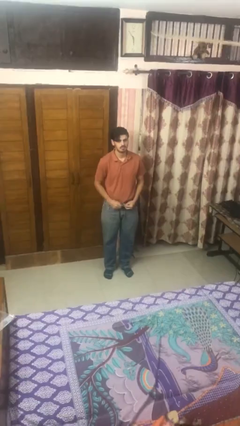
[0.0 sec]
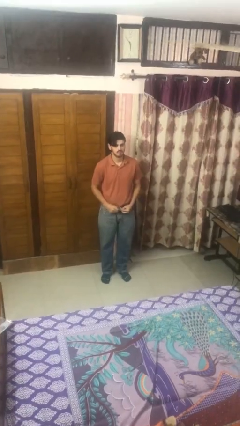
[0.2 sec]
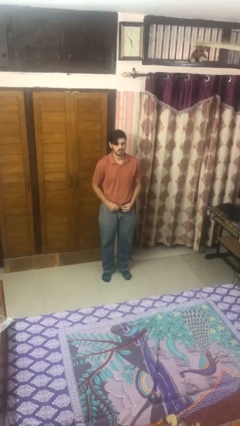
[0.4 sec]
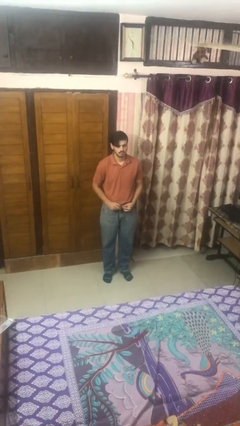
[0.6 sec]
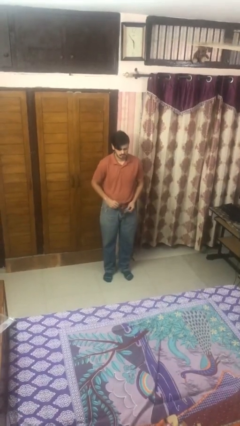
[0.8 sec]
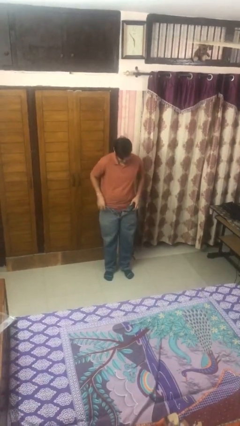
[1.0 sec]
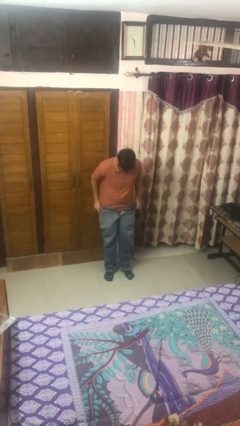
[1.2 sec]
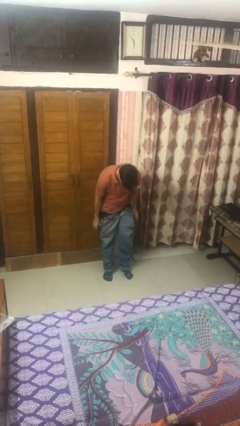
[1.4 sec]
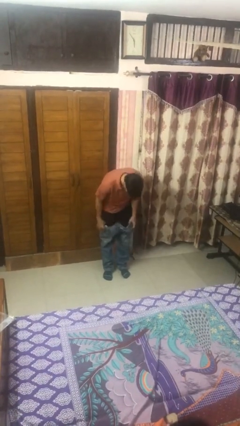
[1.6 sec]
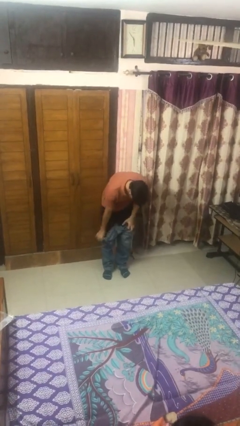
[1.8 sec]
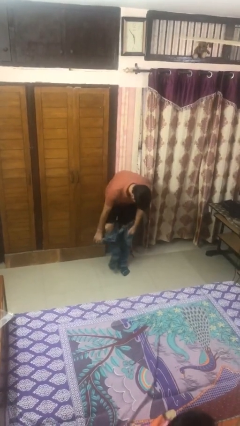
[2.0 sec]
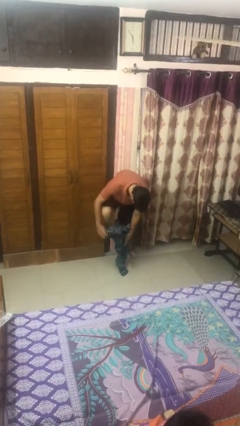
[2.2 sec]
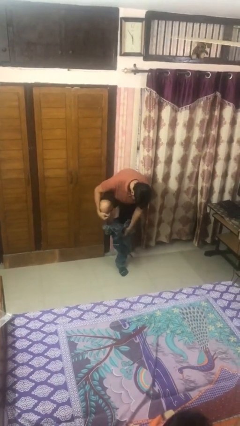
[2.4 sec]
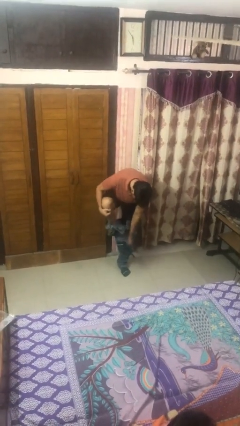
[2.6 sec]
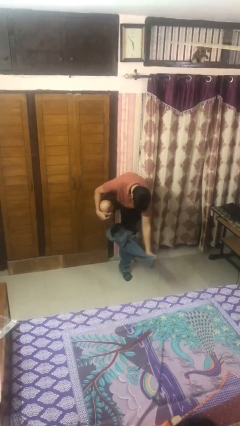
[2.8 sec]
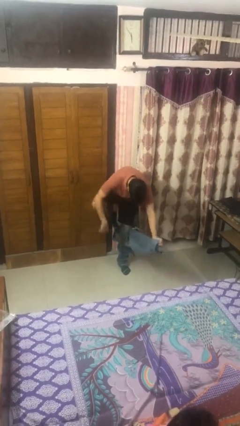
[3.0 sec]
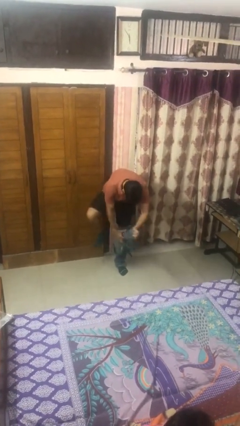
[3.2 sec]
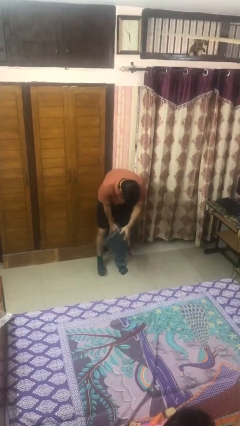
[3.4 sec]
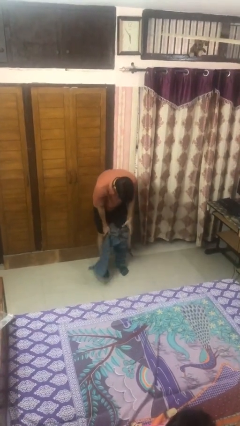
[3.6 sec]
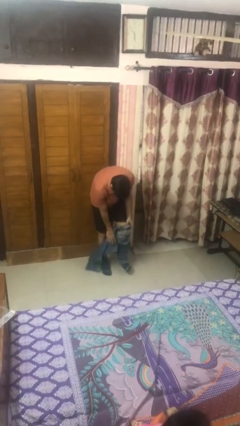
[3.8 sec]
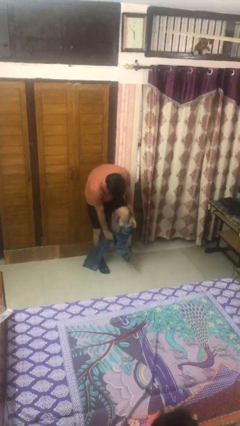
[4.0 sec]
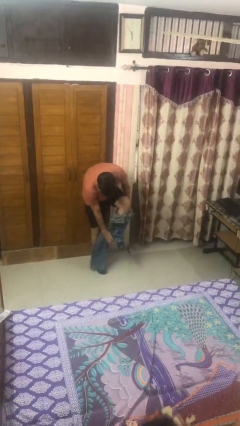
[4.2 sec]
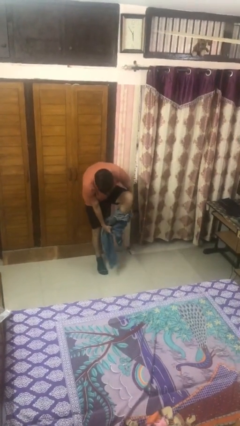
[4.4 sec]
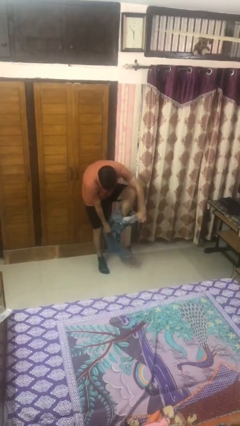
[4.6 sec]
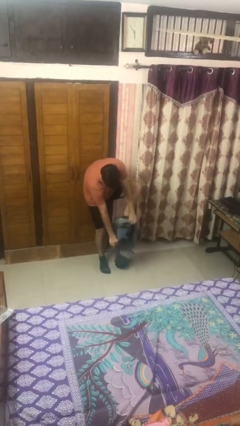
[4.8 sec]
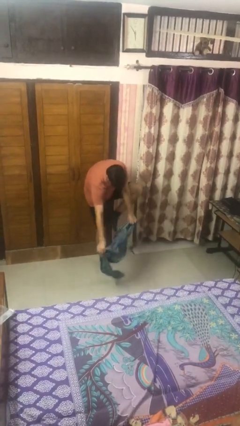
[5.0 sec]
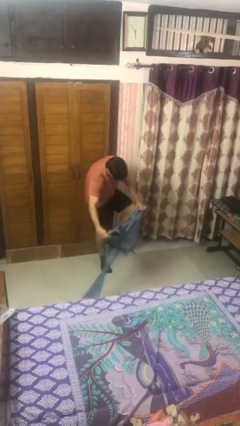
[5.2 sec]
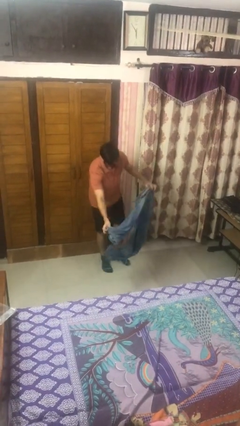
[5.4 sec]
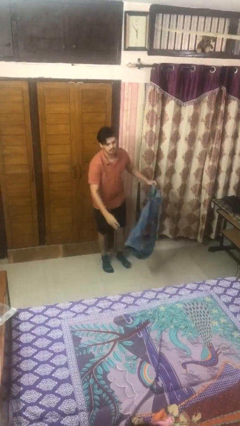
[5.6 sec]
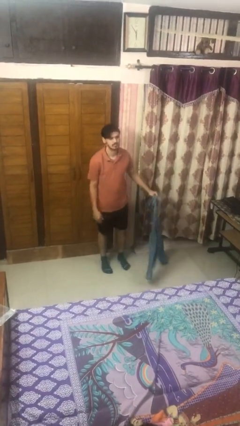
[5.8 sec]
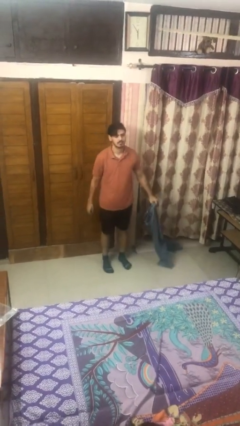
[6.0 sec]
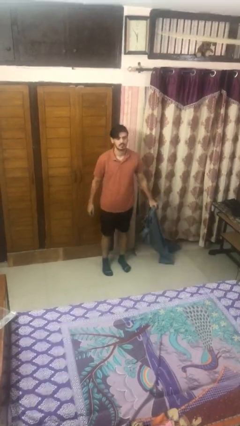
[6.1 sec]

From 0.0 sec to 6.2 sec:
person takes off pants

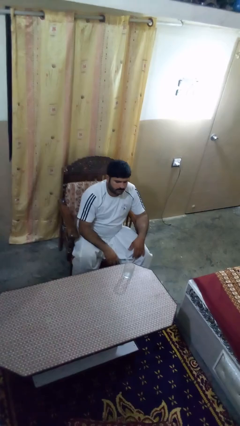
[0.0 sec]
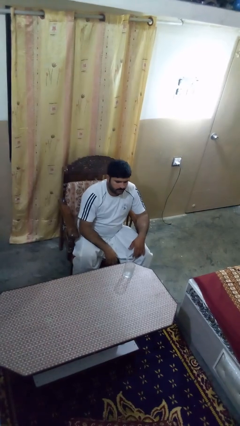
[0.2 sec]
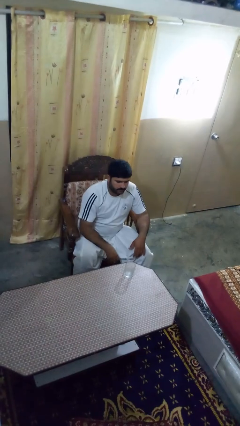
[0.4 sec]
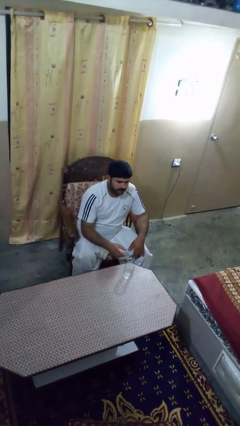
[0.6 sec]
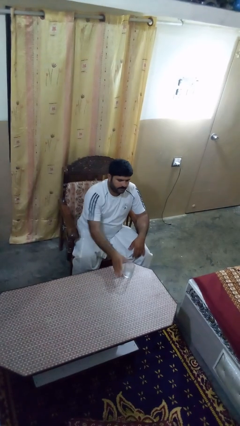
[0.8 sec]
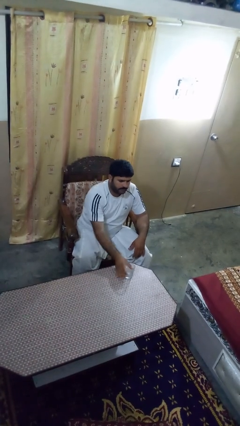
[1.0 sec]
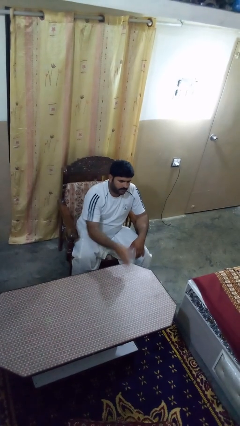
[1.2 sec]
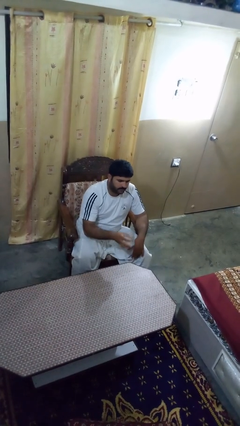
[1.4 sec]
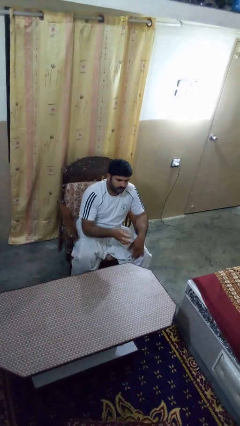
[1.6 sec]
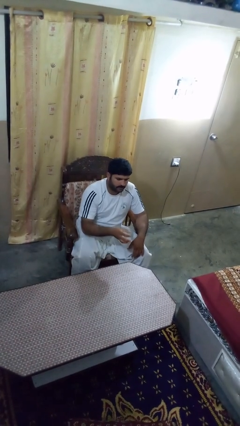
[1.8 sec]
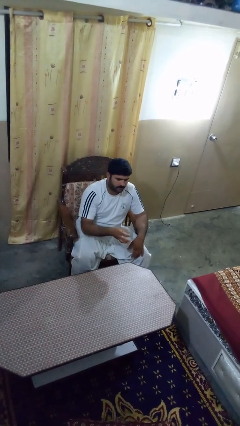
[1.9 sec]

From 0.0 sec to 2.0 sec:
person picks up object from table

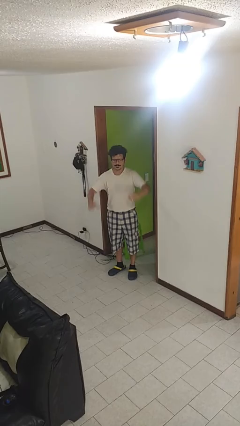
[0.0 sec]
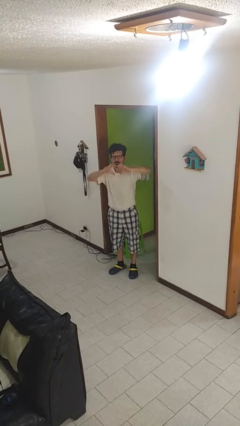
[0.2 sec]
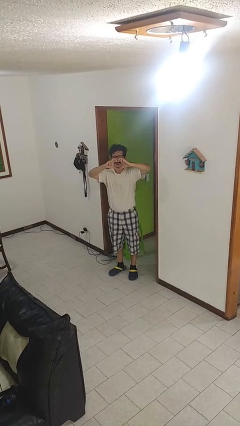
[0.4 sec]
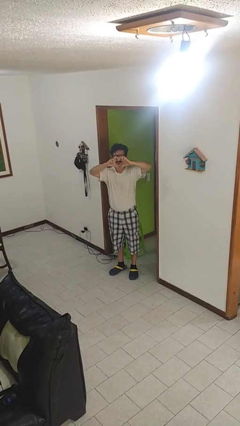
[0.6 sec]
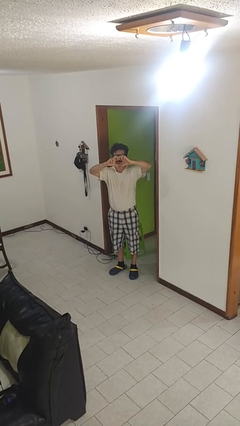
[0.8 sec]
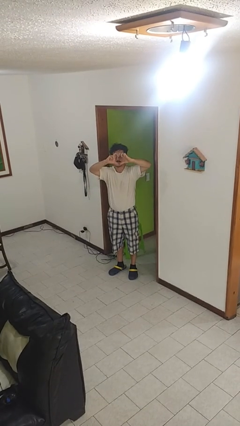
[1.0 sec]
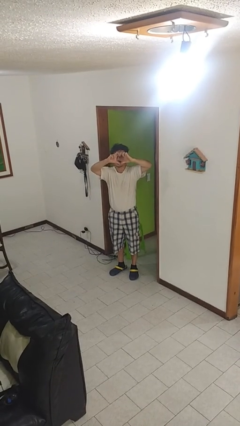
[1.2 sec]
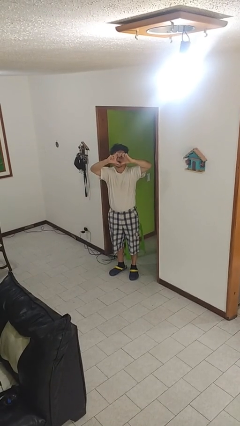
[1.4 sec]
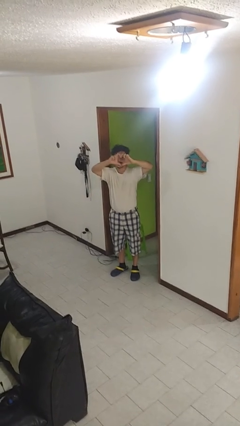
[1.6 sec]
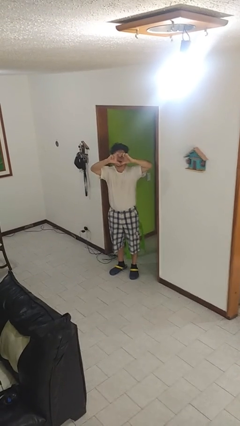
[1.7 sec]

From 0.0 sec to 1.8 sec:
person gestures heart

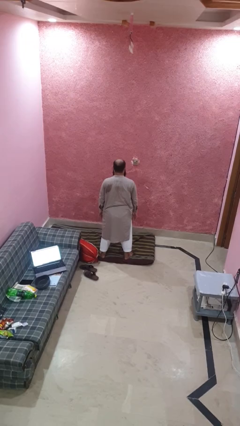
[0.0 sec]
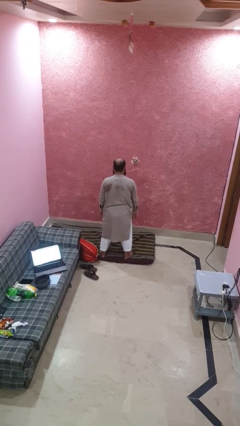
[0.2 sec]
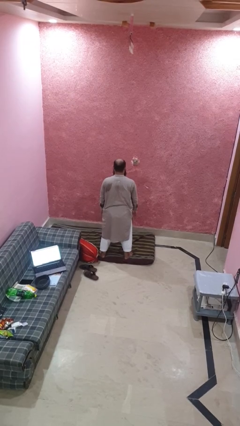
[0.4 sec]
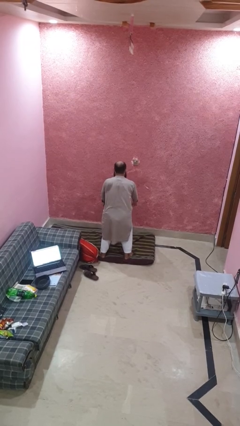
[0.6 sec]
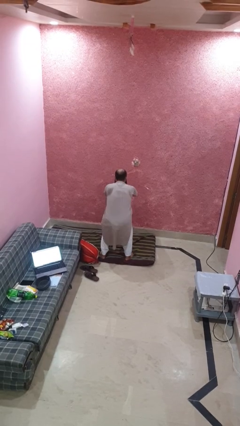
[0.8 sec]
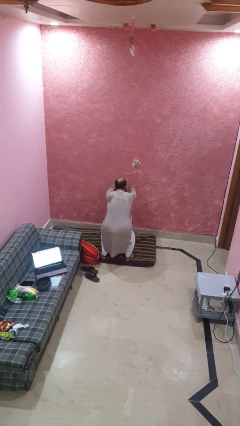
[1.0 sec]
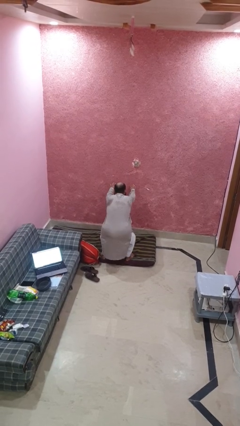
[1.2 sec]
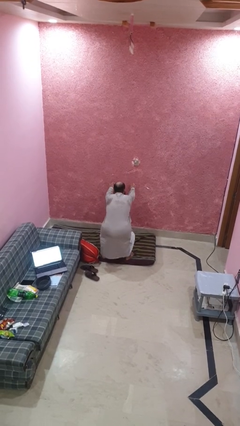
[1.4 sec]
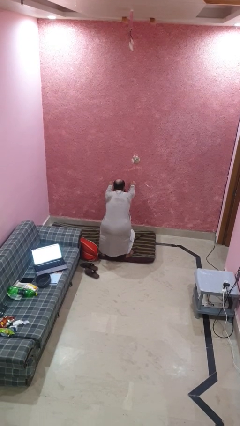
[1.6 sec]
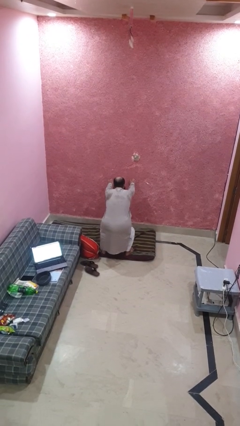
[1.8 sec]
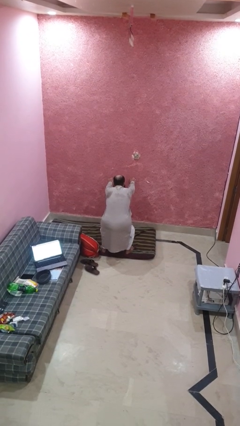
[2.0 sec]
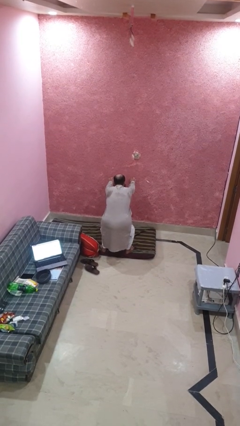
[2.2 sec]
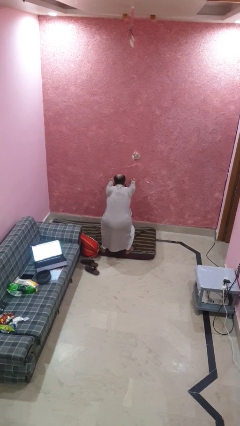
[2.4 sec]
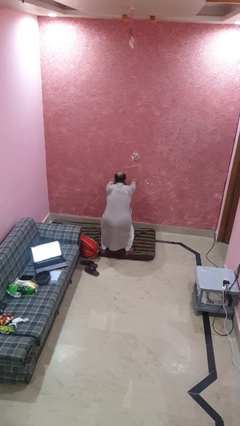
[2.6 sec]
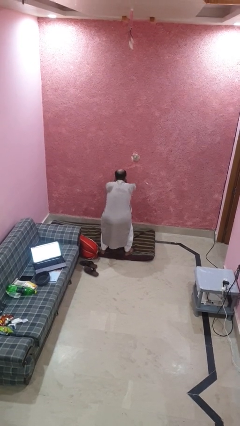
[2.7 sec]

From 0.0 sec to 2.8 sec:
person squats

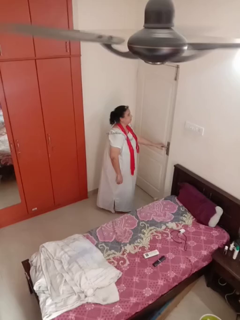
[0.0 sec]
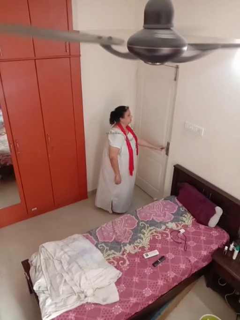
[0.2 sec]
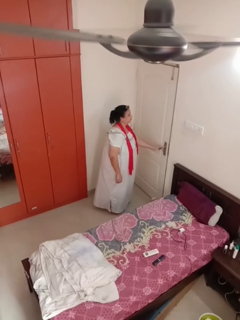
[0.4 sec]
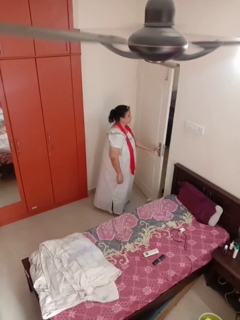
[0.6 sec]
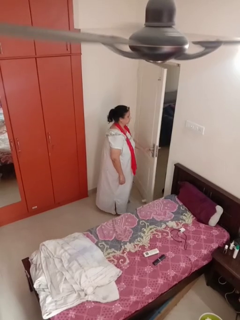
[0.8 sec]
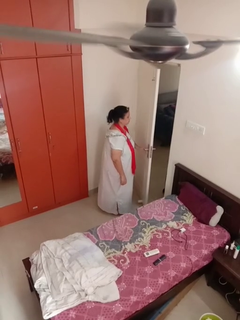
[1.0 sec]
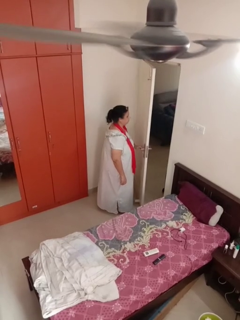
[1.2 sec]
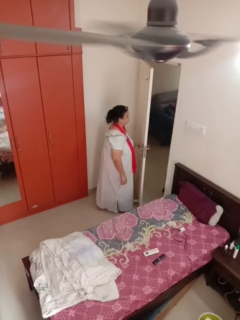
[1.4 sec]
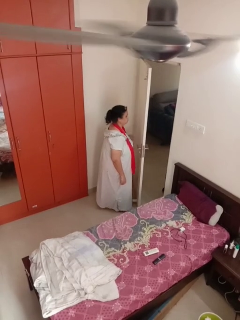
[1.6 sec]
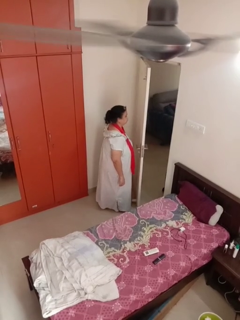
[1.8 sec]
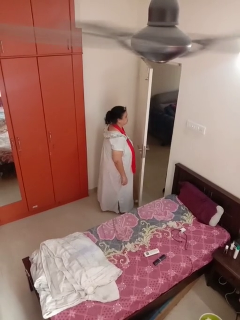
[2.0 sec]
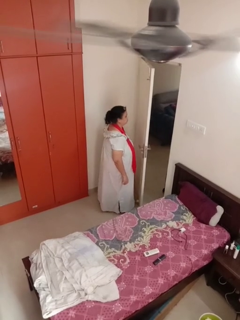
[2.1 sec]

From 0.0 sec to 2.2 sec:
person opens facility door

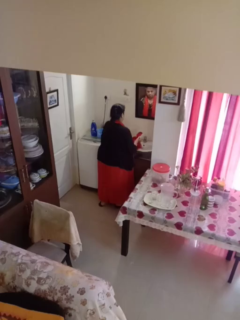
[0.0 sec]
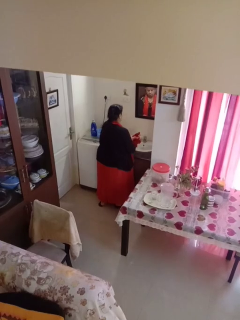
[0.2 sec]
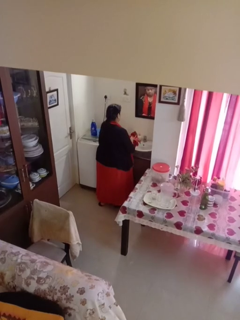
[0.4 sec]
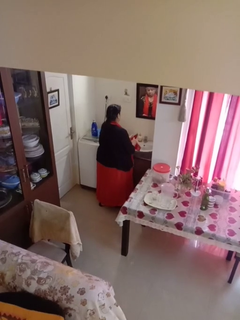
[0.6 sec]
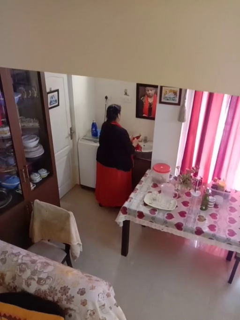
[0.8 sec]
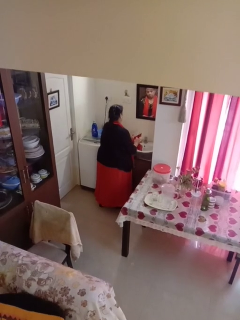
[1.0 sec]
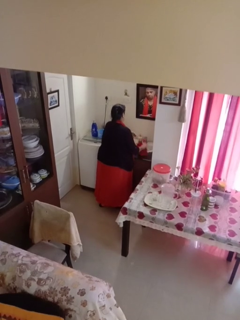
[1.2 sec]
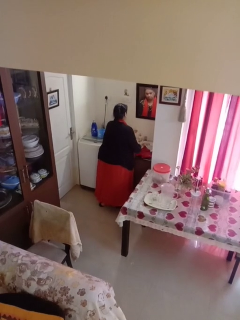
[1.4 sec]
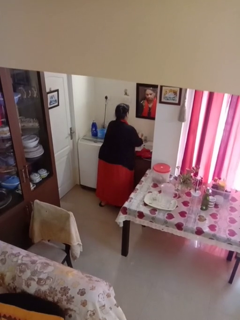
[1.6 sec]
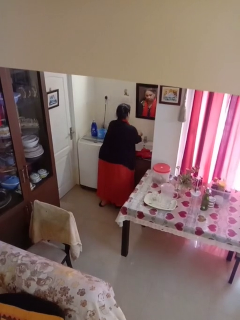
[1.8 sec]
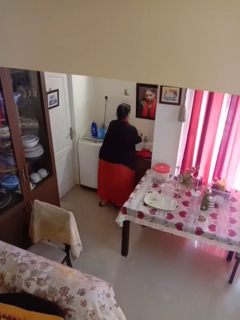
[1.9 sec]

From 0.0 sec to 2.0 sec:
person dries hands with towel

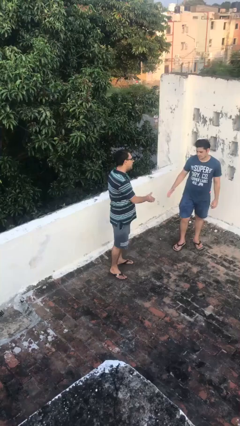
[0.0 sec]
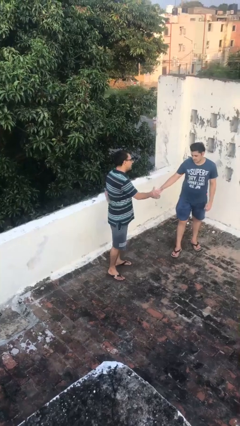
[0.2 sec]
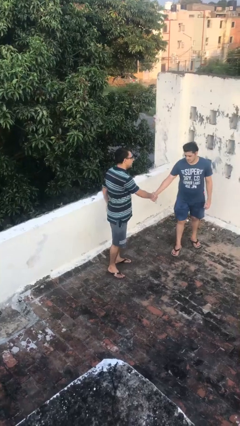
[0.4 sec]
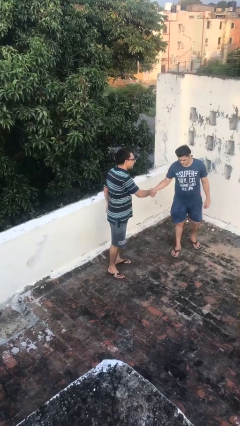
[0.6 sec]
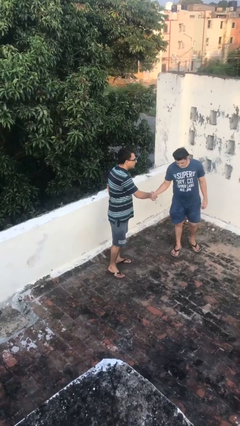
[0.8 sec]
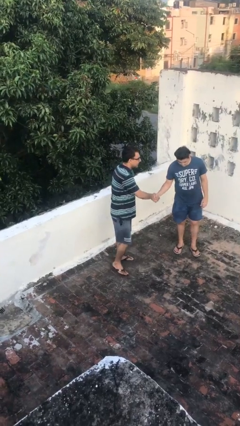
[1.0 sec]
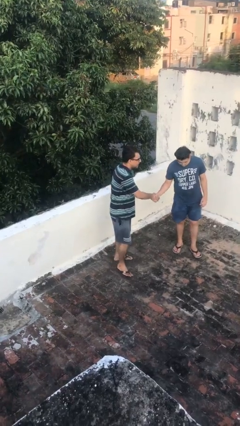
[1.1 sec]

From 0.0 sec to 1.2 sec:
person shakes hand
